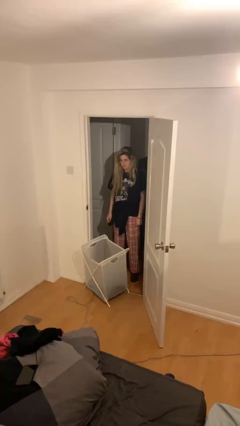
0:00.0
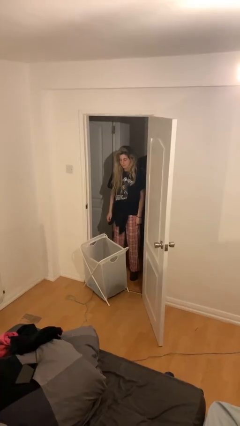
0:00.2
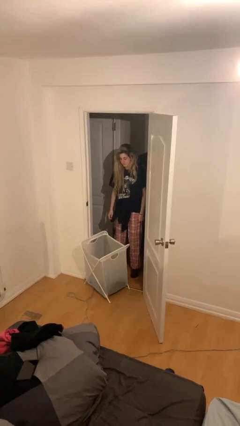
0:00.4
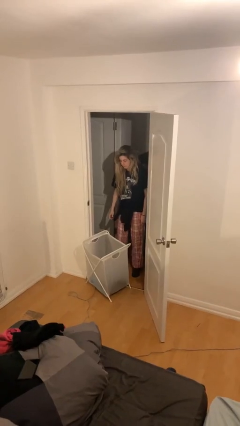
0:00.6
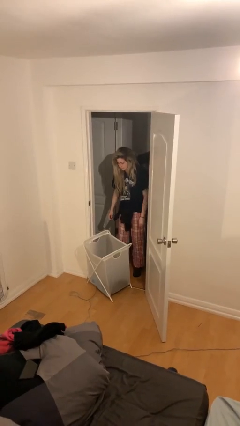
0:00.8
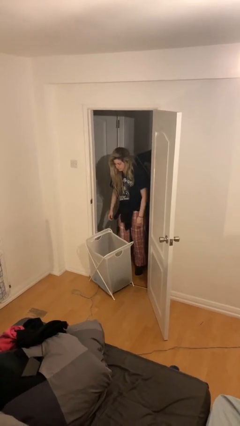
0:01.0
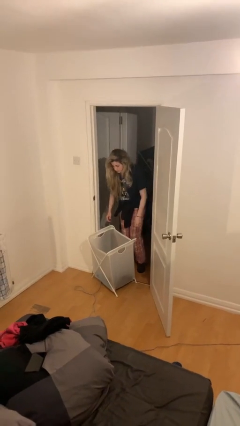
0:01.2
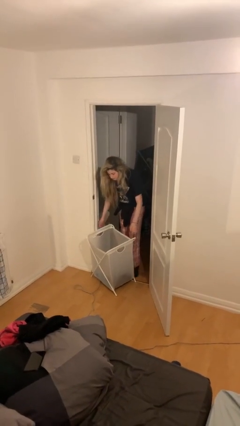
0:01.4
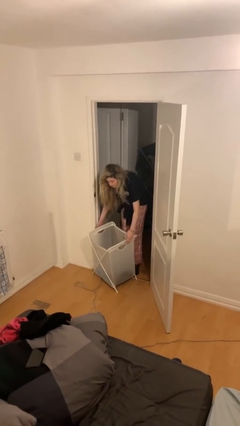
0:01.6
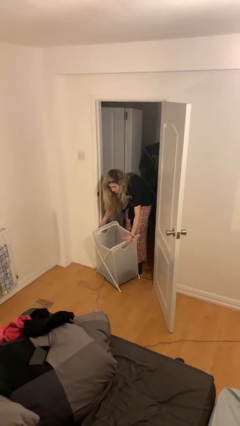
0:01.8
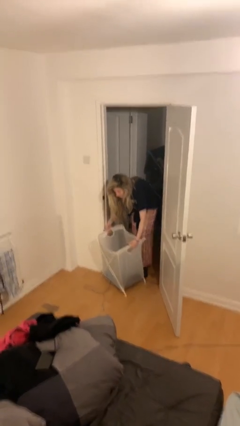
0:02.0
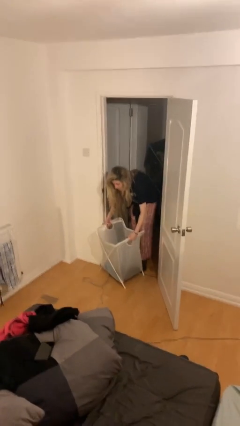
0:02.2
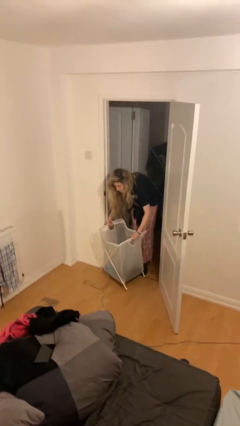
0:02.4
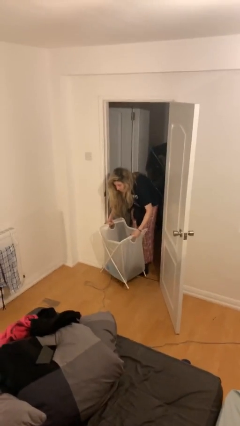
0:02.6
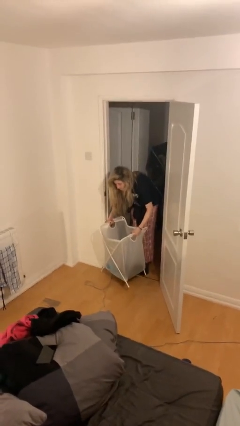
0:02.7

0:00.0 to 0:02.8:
person picks up object from floor

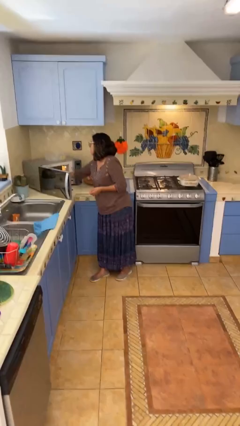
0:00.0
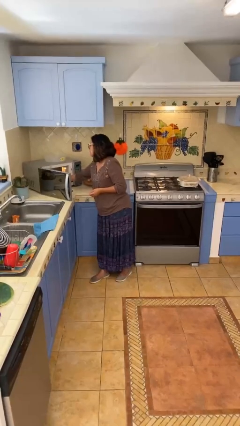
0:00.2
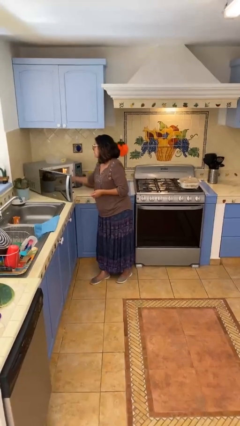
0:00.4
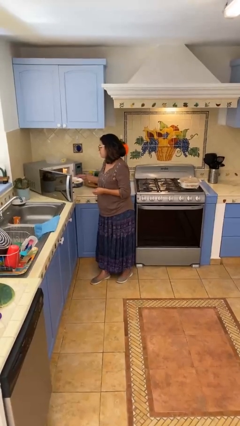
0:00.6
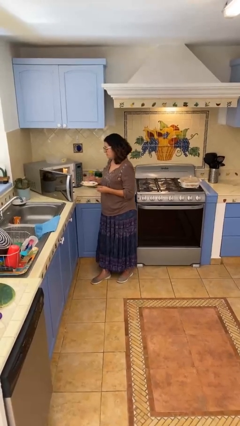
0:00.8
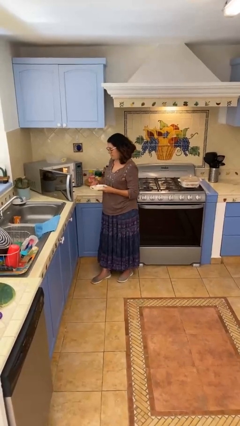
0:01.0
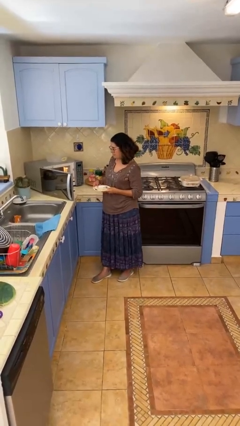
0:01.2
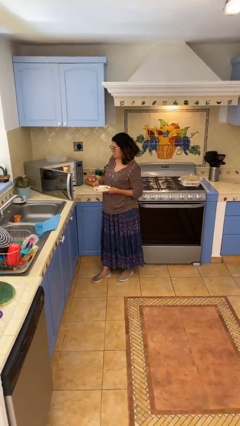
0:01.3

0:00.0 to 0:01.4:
person takes object from microwave

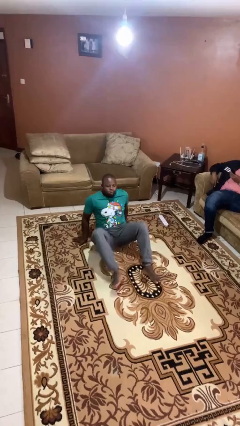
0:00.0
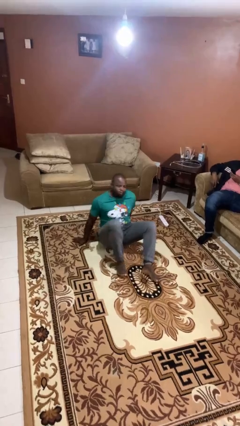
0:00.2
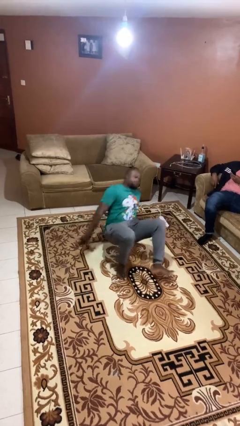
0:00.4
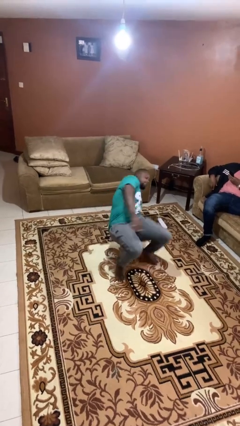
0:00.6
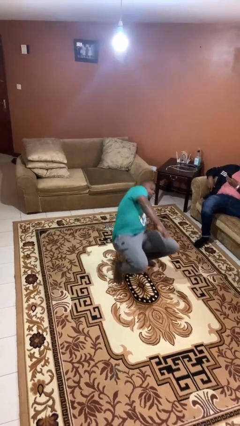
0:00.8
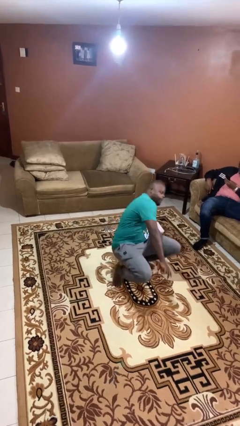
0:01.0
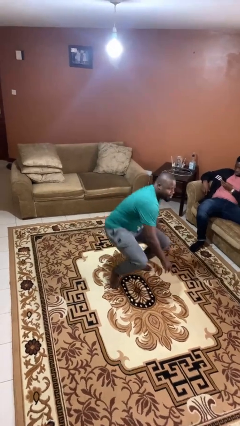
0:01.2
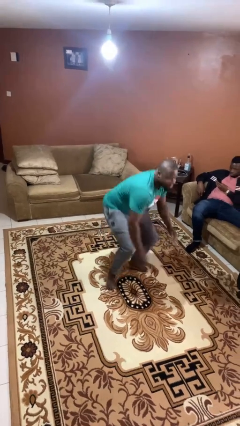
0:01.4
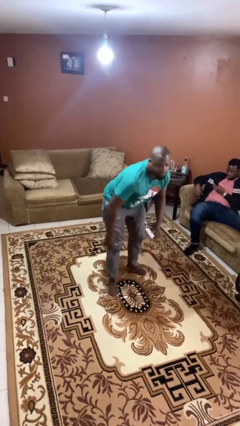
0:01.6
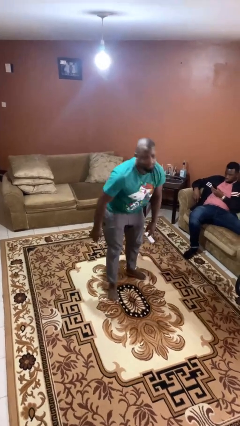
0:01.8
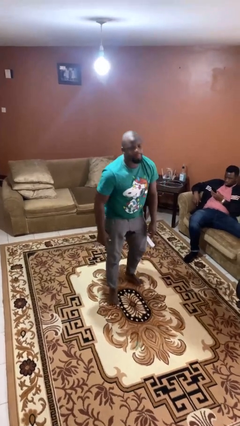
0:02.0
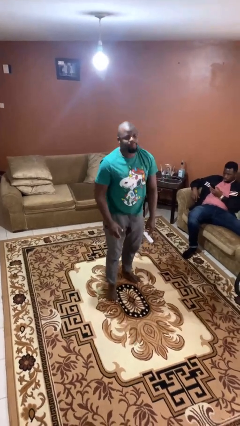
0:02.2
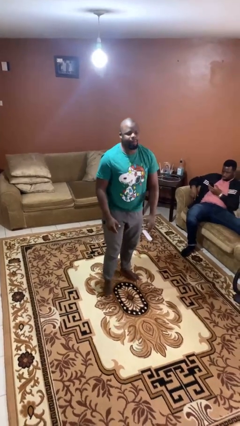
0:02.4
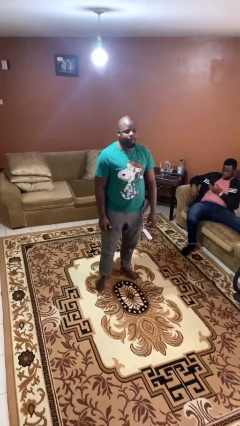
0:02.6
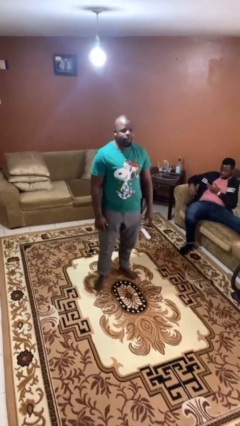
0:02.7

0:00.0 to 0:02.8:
person stands up

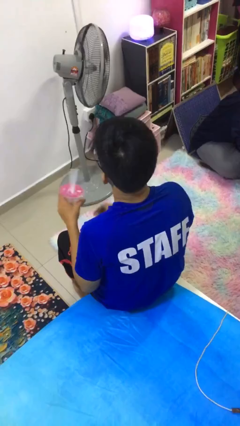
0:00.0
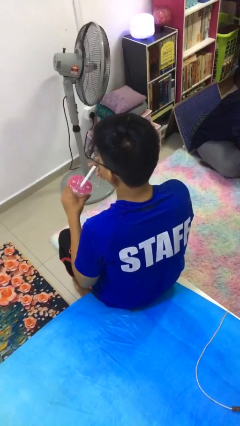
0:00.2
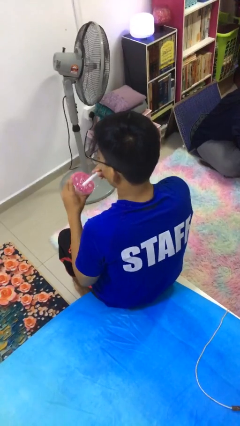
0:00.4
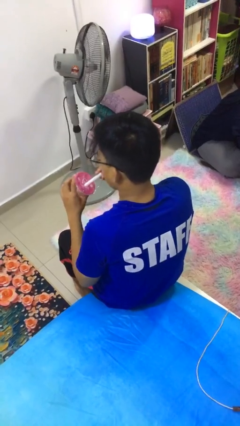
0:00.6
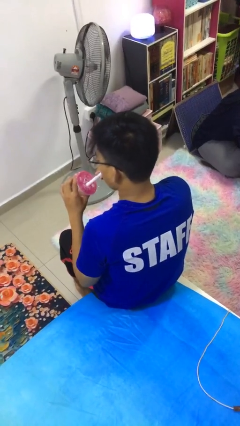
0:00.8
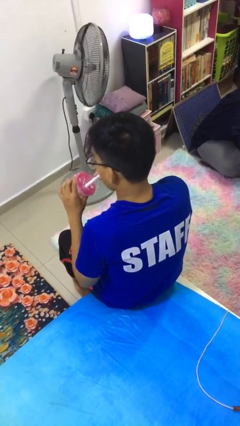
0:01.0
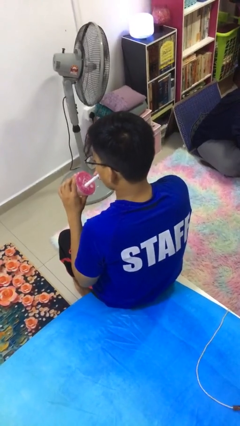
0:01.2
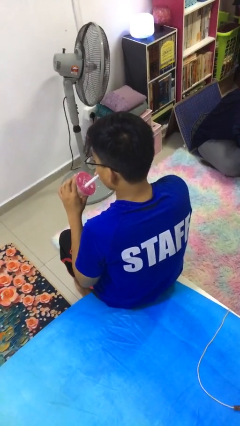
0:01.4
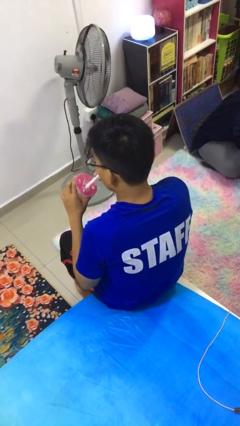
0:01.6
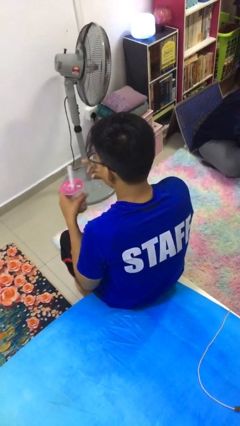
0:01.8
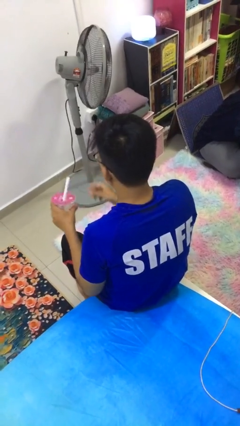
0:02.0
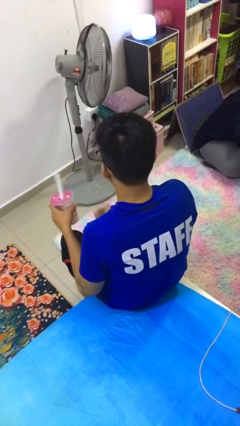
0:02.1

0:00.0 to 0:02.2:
person drinks from straw

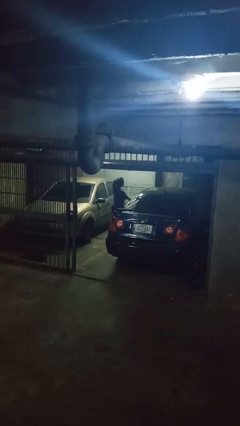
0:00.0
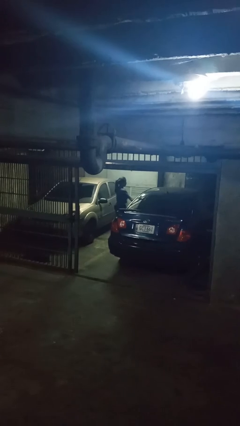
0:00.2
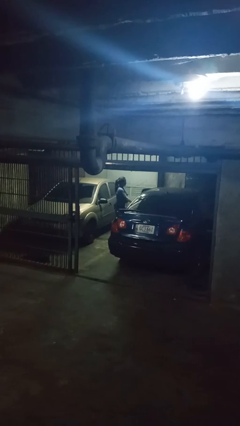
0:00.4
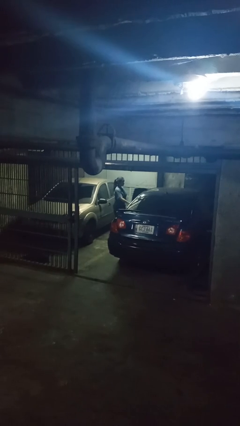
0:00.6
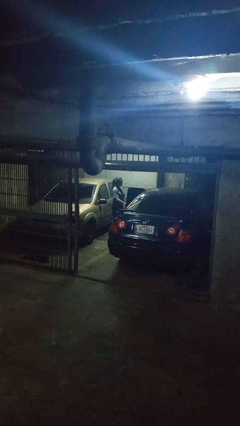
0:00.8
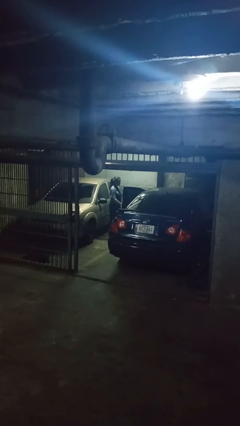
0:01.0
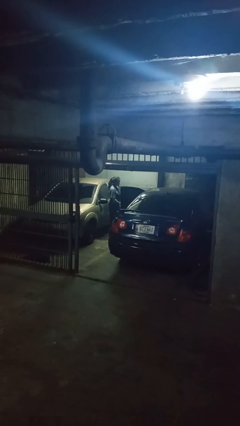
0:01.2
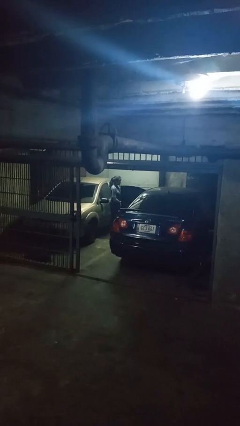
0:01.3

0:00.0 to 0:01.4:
person opens car door

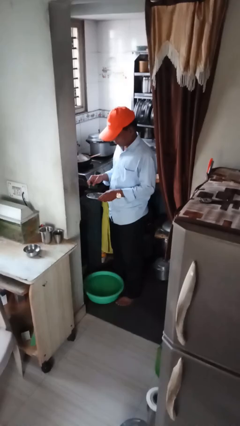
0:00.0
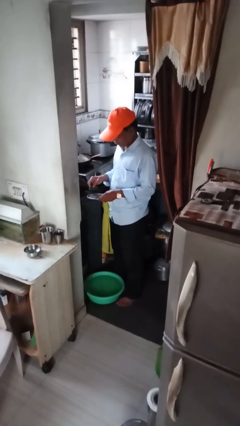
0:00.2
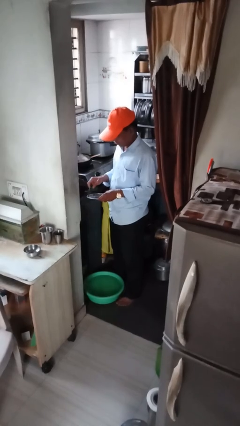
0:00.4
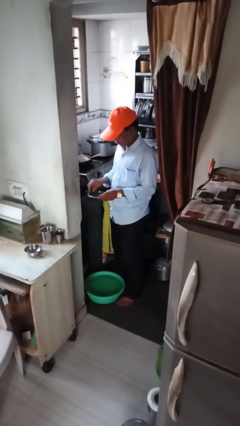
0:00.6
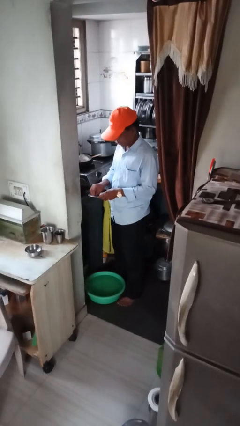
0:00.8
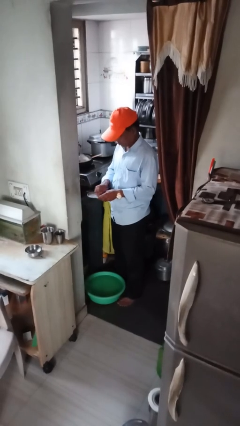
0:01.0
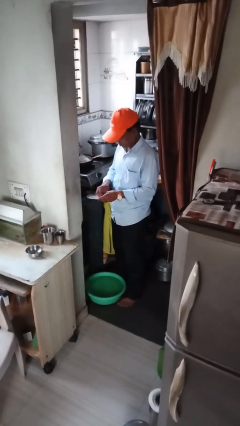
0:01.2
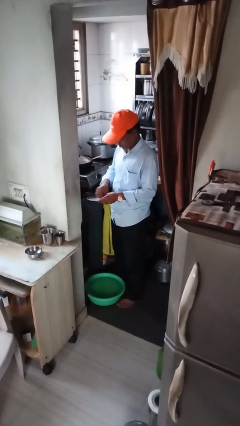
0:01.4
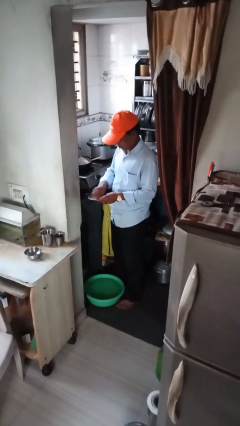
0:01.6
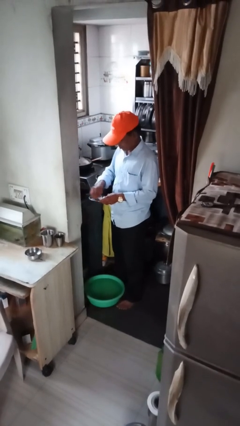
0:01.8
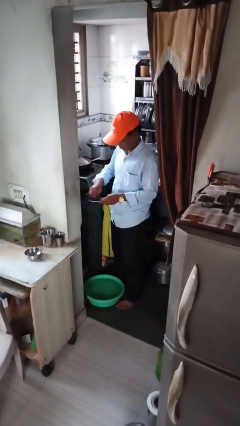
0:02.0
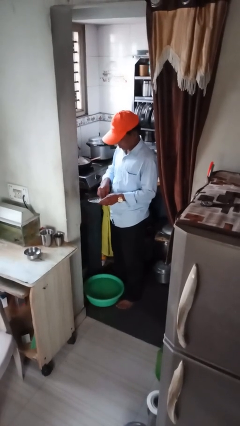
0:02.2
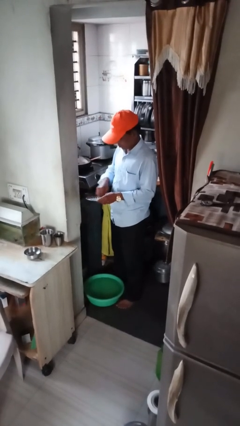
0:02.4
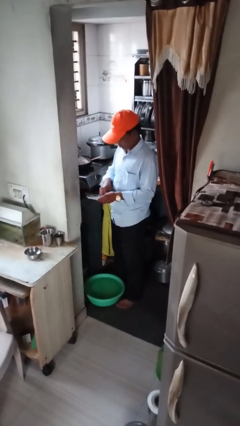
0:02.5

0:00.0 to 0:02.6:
person washes dish

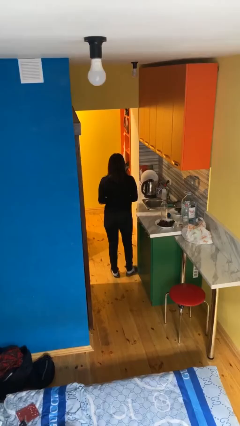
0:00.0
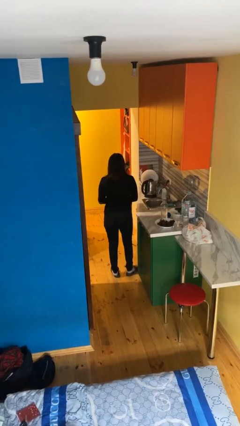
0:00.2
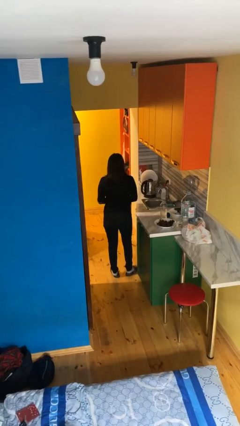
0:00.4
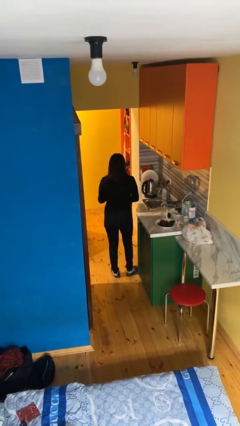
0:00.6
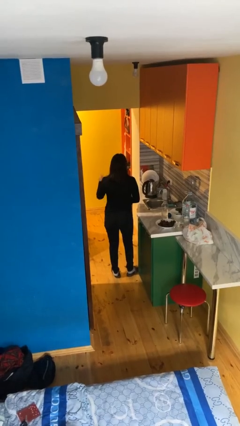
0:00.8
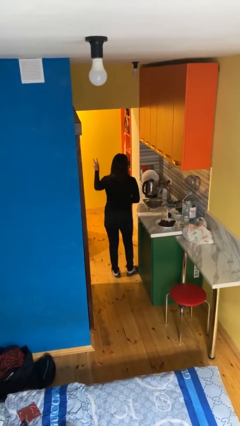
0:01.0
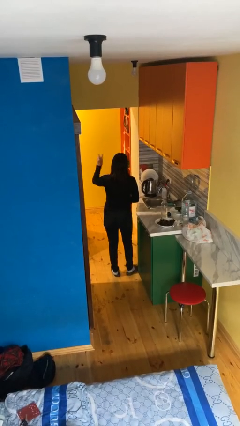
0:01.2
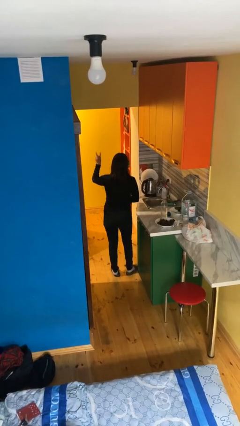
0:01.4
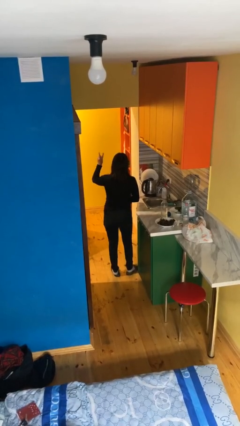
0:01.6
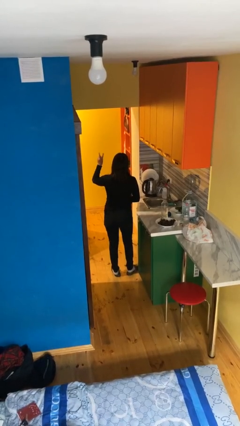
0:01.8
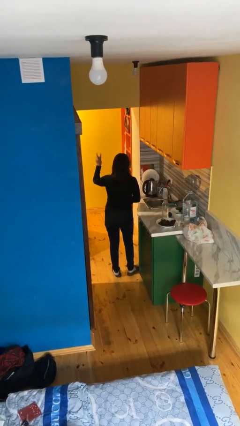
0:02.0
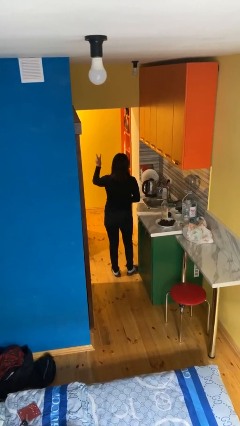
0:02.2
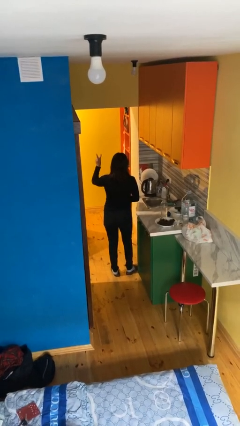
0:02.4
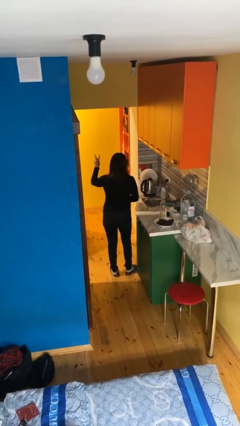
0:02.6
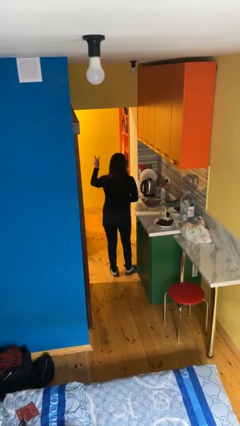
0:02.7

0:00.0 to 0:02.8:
person gestures peace

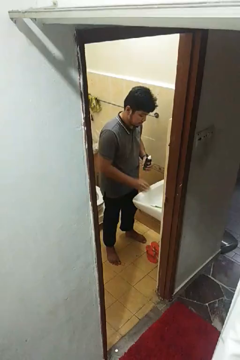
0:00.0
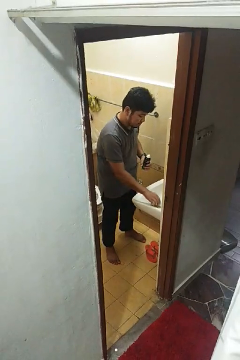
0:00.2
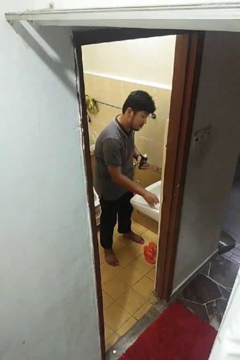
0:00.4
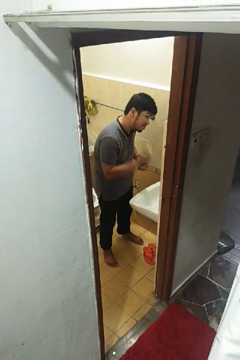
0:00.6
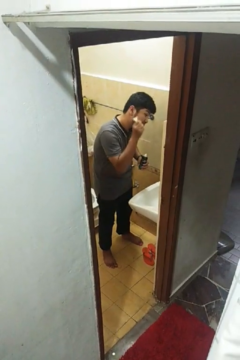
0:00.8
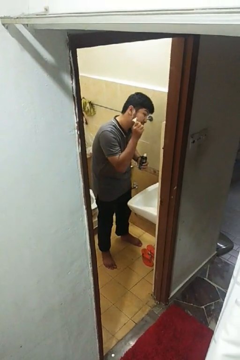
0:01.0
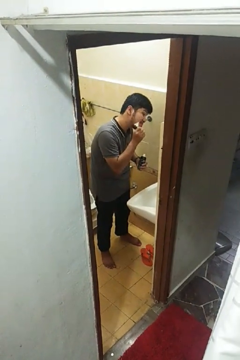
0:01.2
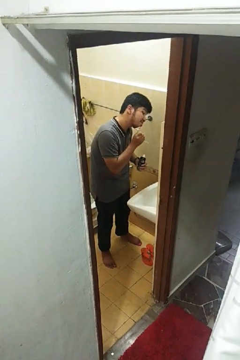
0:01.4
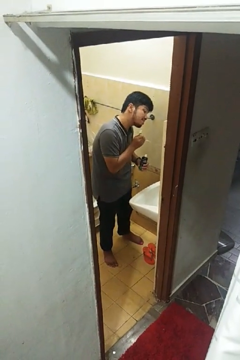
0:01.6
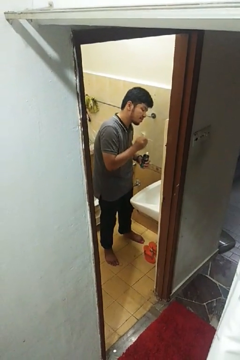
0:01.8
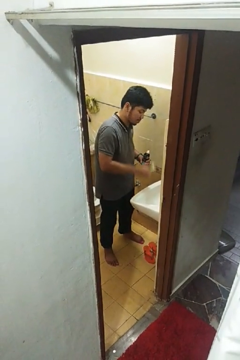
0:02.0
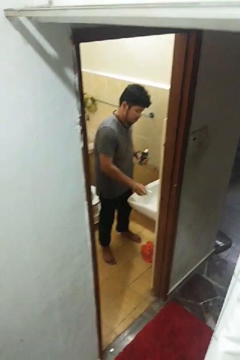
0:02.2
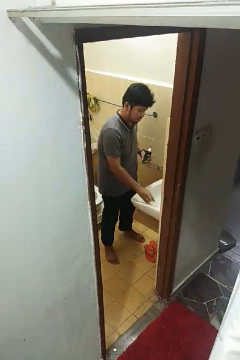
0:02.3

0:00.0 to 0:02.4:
person shaves face
